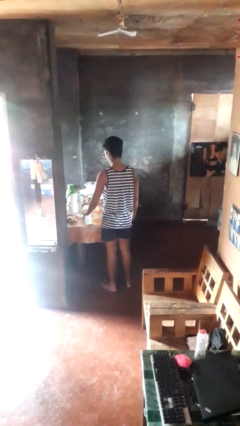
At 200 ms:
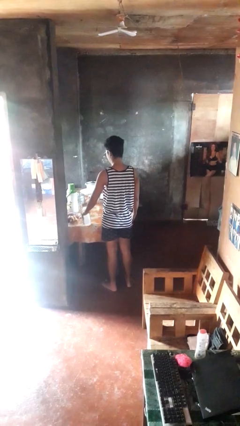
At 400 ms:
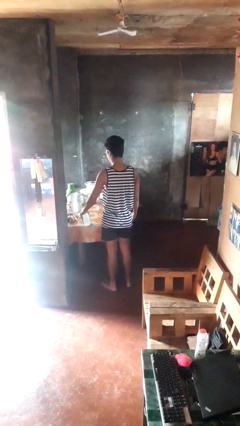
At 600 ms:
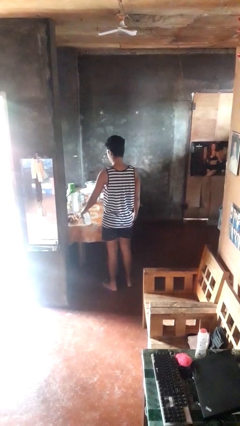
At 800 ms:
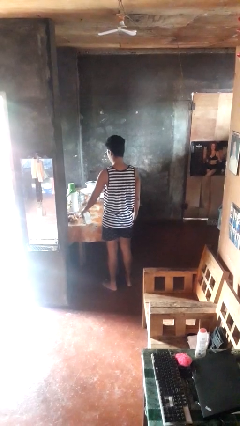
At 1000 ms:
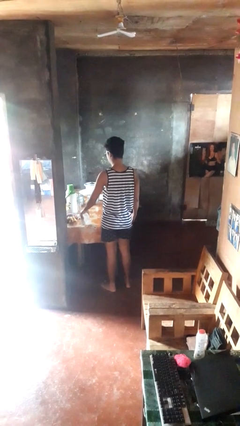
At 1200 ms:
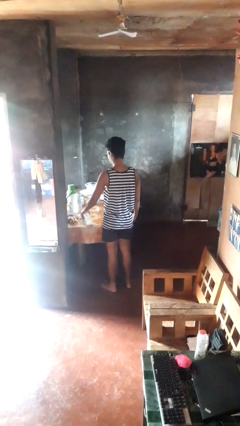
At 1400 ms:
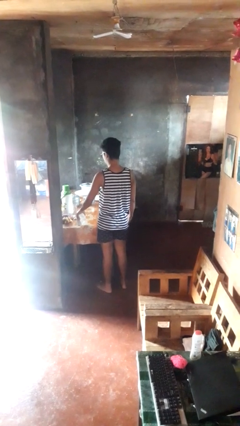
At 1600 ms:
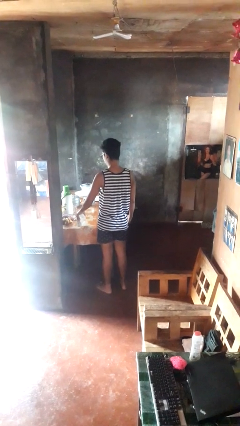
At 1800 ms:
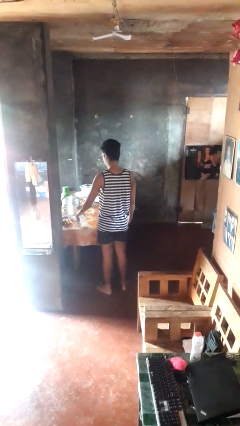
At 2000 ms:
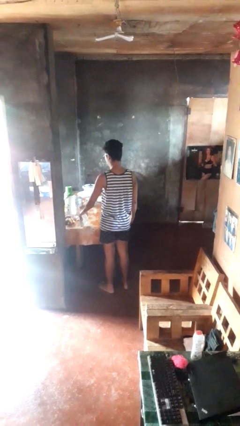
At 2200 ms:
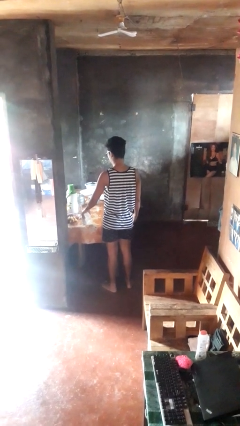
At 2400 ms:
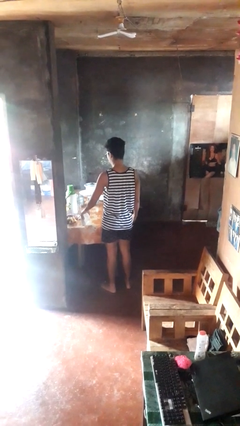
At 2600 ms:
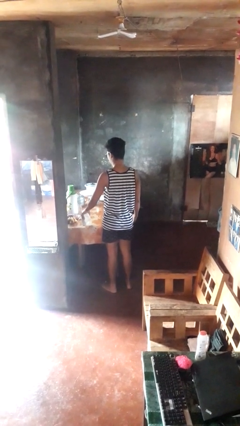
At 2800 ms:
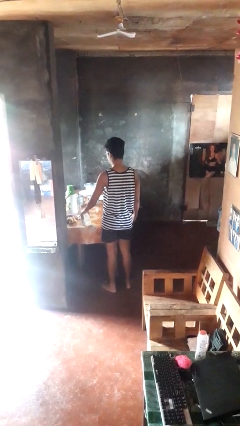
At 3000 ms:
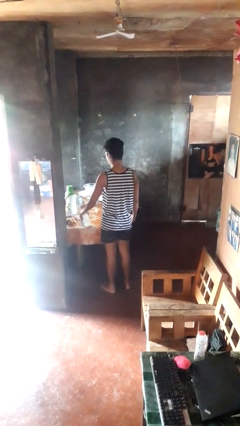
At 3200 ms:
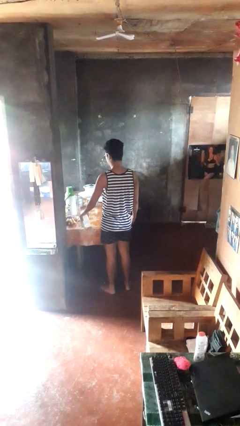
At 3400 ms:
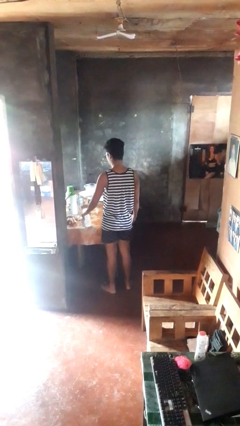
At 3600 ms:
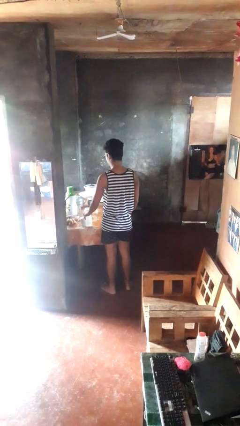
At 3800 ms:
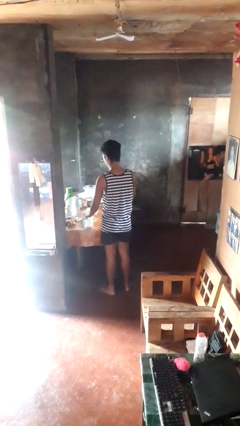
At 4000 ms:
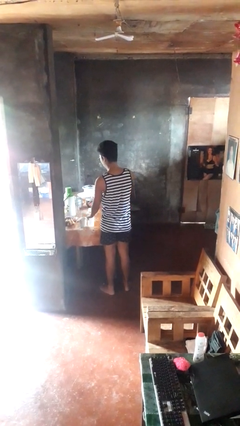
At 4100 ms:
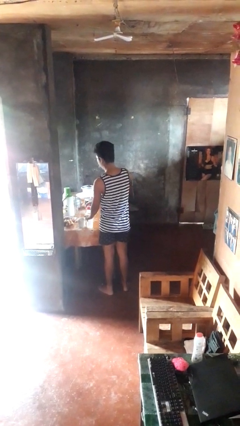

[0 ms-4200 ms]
person pours liquid into cup

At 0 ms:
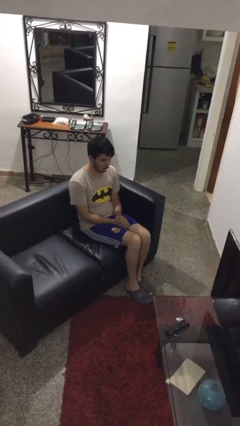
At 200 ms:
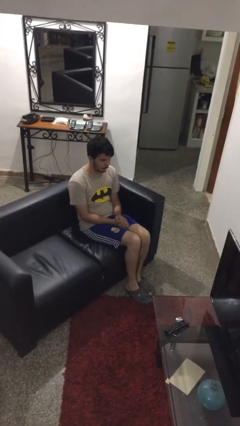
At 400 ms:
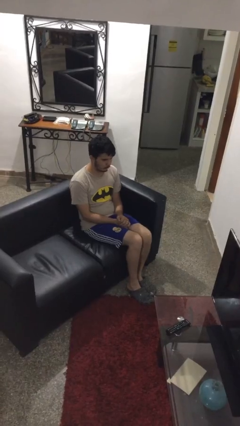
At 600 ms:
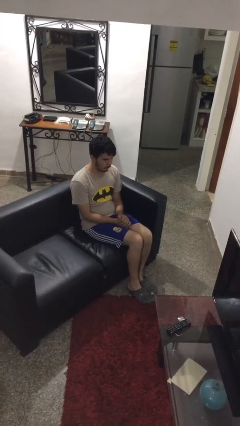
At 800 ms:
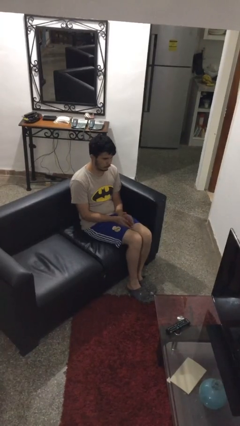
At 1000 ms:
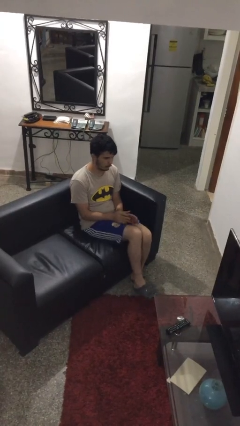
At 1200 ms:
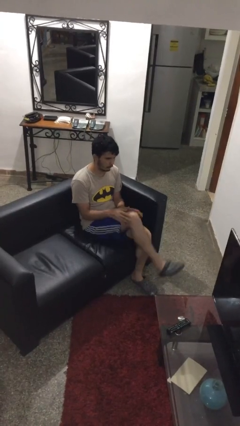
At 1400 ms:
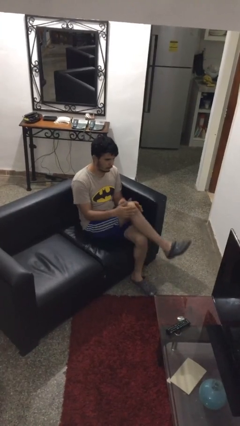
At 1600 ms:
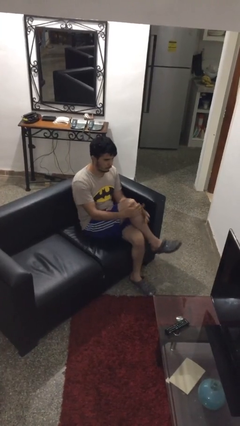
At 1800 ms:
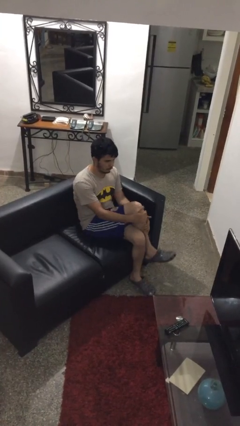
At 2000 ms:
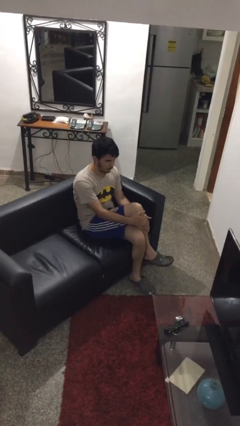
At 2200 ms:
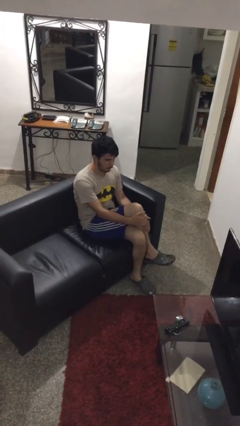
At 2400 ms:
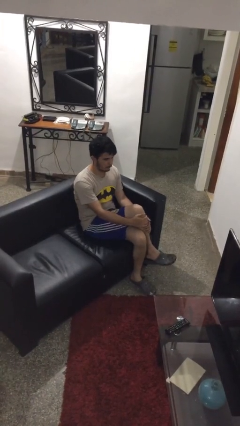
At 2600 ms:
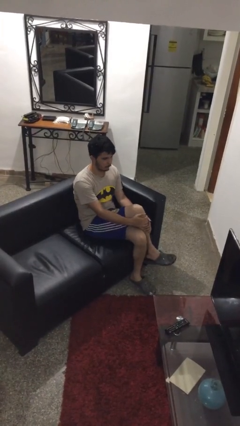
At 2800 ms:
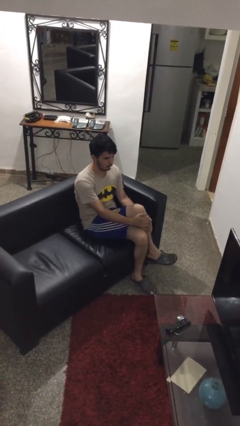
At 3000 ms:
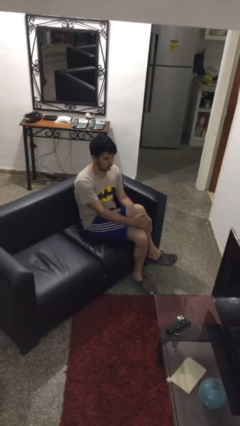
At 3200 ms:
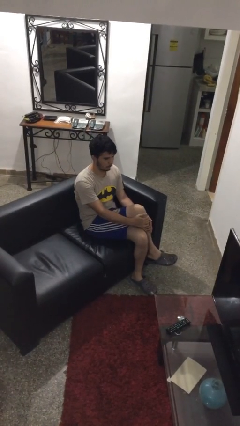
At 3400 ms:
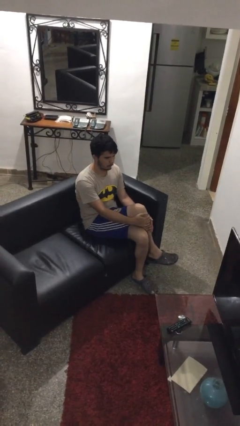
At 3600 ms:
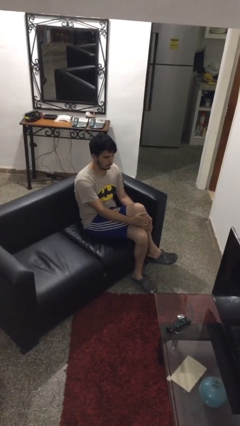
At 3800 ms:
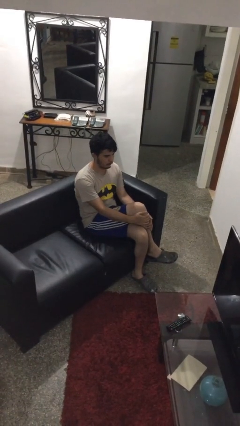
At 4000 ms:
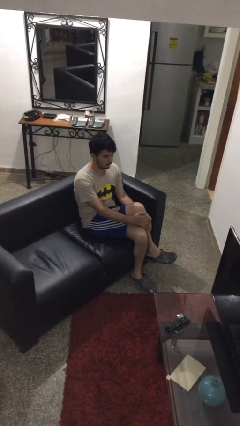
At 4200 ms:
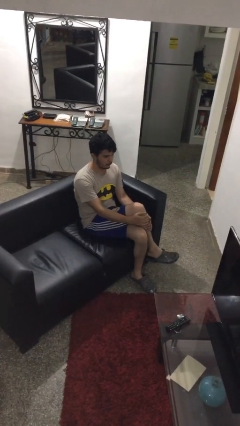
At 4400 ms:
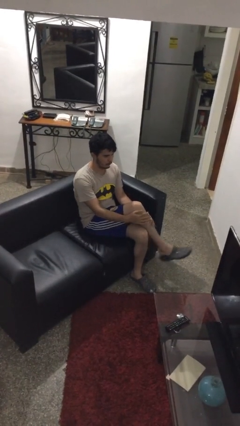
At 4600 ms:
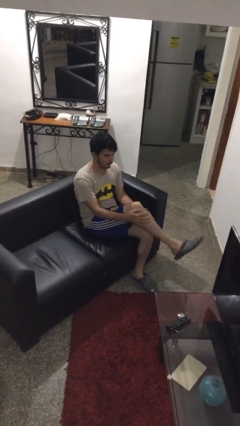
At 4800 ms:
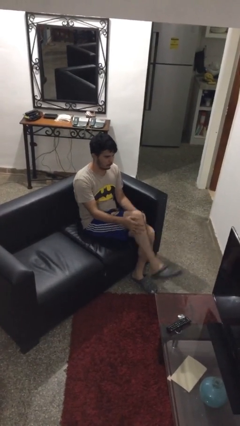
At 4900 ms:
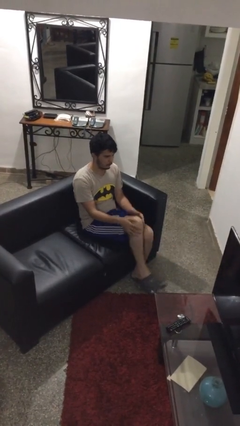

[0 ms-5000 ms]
person crosses legs

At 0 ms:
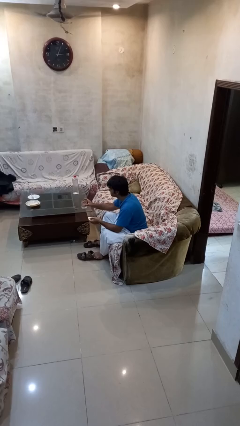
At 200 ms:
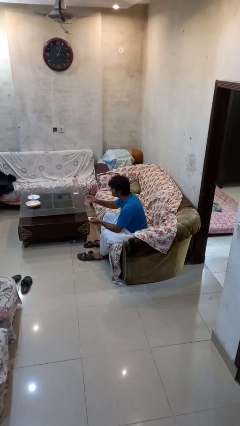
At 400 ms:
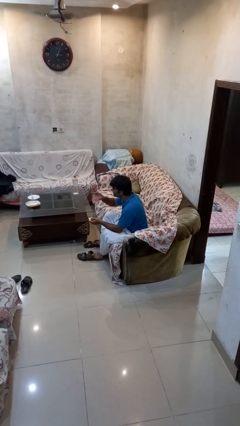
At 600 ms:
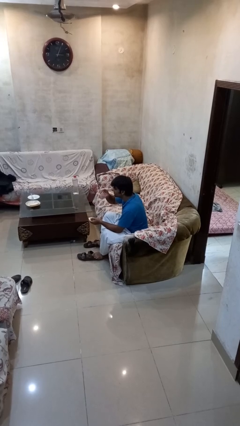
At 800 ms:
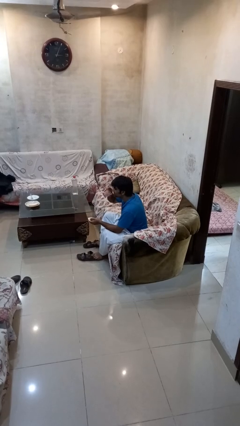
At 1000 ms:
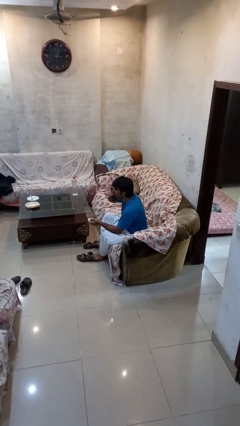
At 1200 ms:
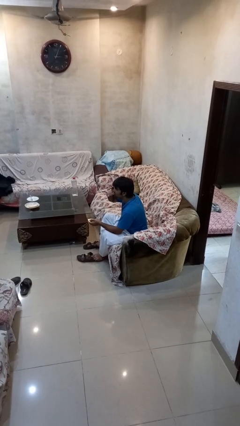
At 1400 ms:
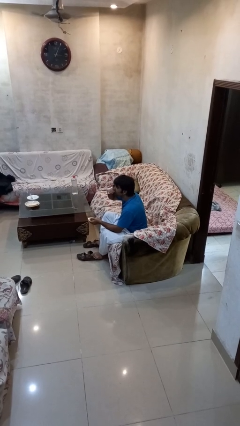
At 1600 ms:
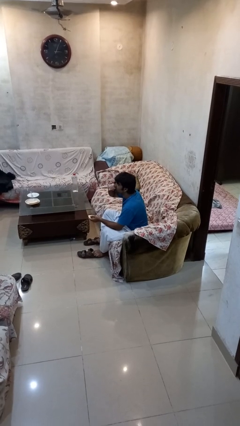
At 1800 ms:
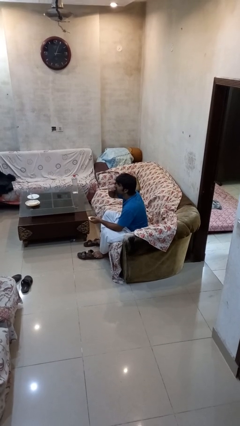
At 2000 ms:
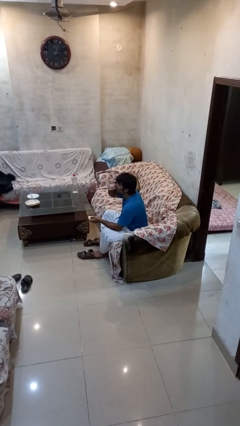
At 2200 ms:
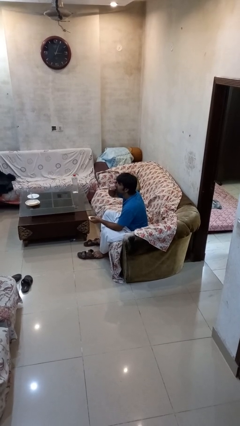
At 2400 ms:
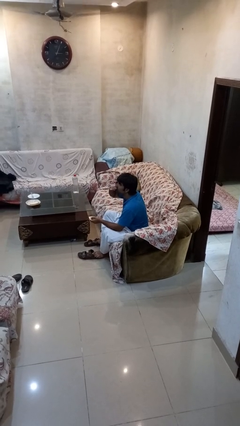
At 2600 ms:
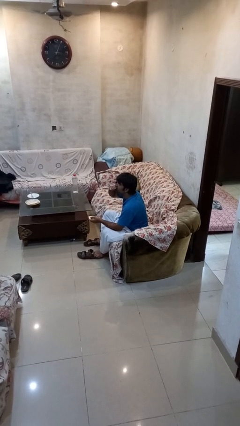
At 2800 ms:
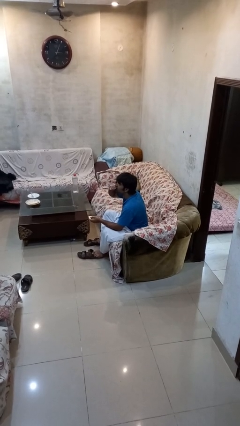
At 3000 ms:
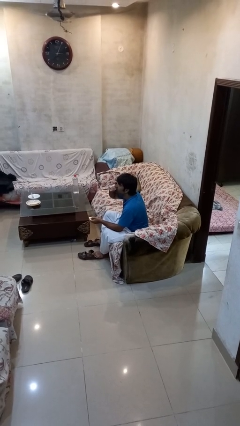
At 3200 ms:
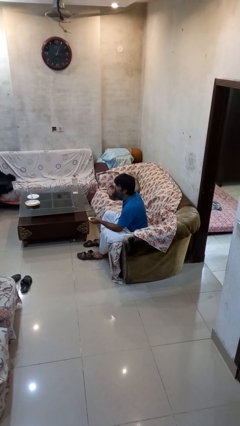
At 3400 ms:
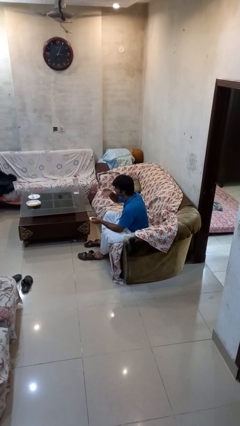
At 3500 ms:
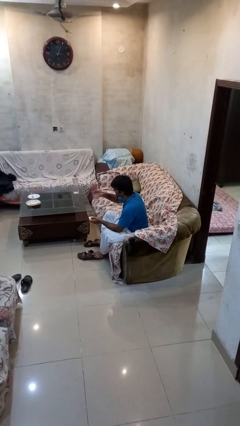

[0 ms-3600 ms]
person drinks from cup

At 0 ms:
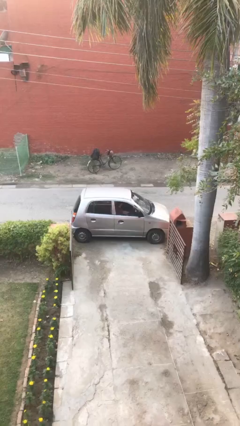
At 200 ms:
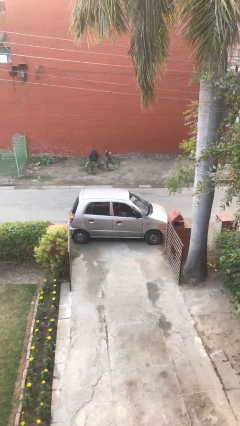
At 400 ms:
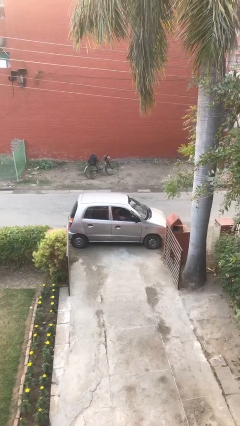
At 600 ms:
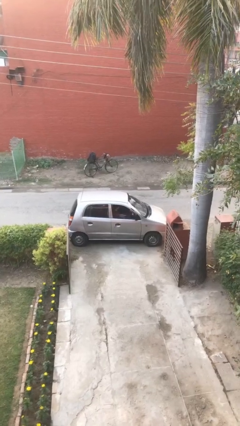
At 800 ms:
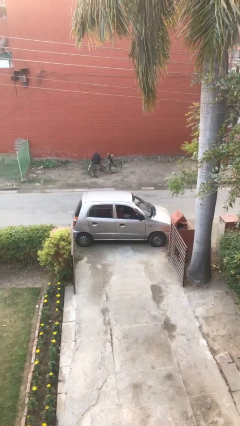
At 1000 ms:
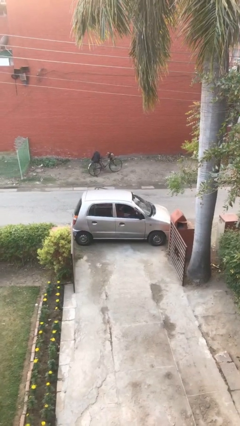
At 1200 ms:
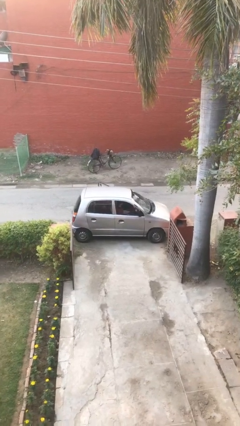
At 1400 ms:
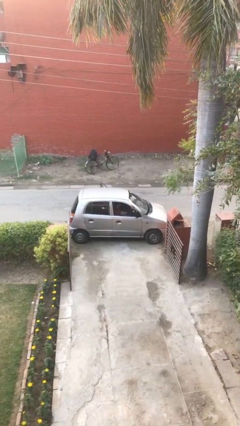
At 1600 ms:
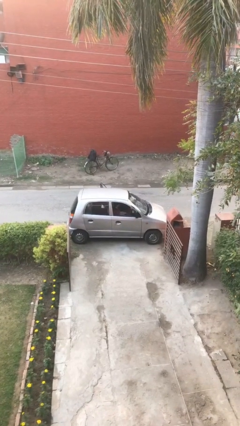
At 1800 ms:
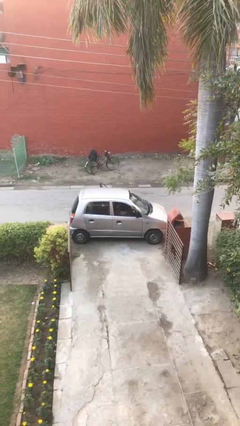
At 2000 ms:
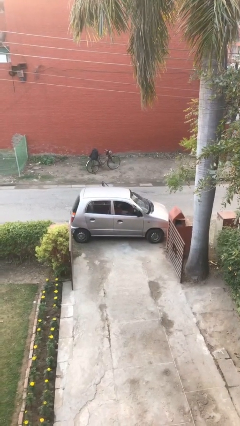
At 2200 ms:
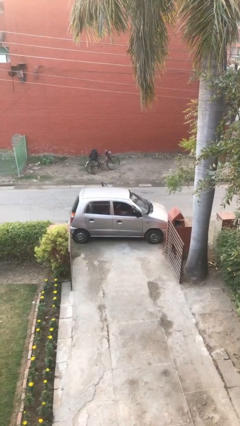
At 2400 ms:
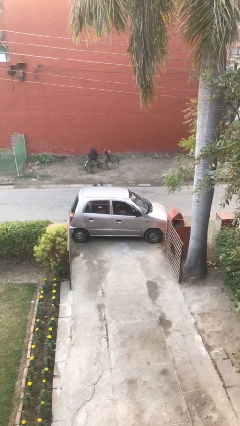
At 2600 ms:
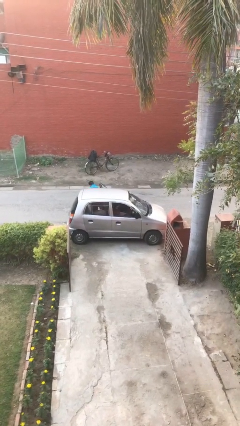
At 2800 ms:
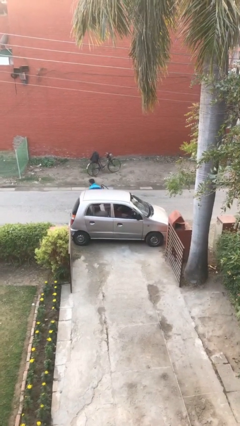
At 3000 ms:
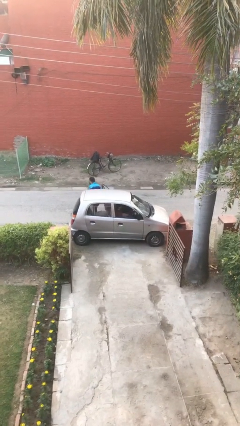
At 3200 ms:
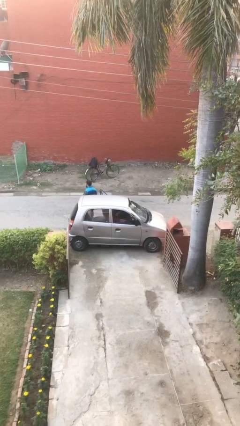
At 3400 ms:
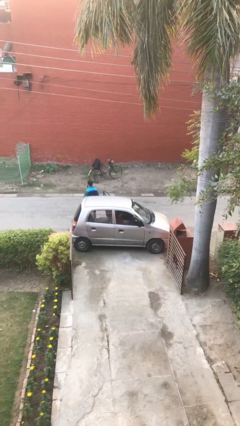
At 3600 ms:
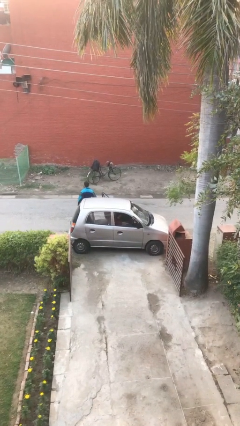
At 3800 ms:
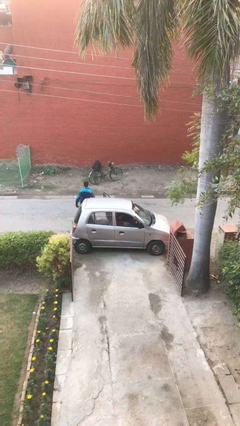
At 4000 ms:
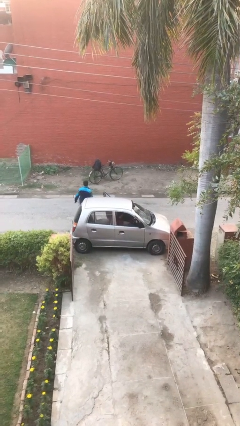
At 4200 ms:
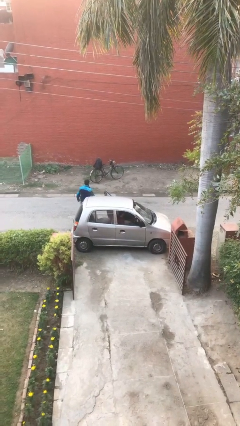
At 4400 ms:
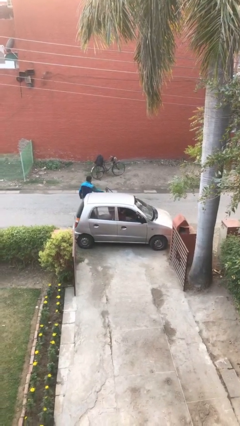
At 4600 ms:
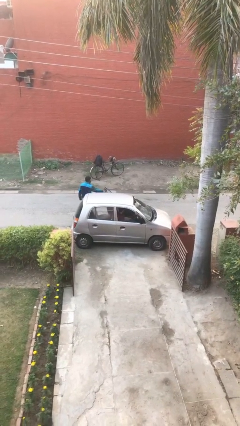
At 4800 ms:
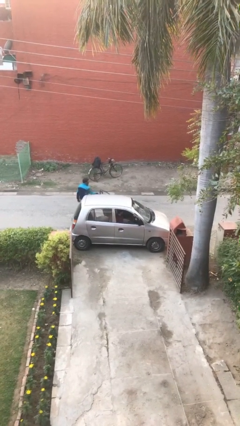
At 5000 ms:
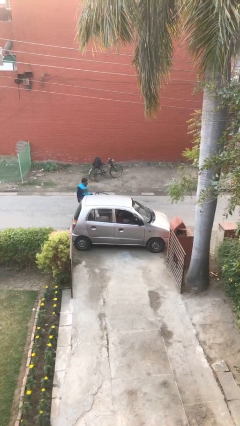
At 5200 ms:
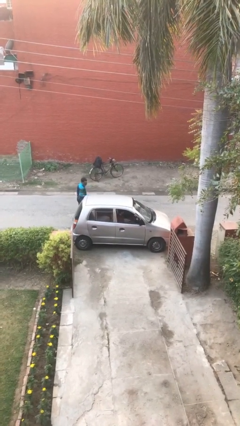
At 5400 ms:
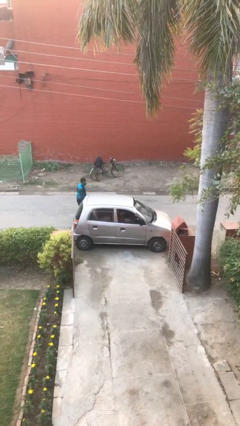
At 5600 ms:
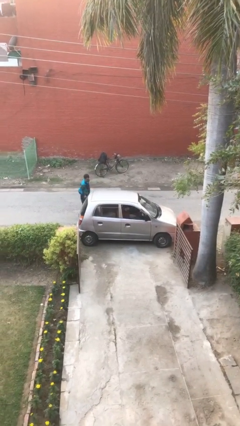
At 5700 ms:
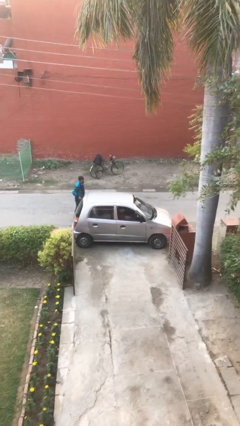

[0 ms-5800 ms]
car drops off person
